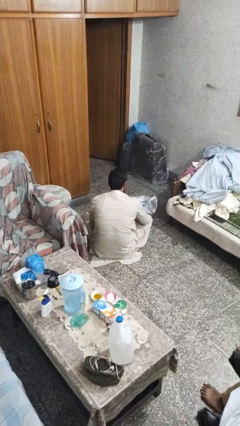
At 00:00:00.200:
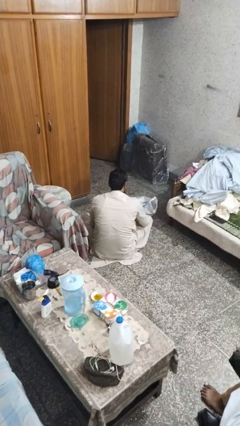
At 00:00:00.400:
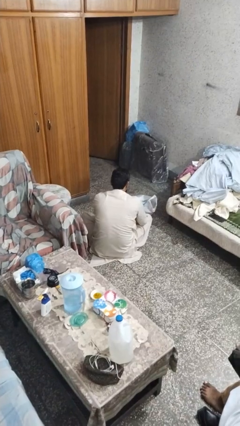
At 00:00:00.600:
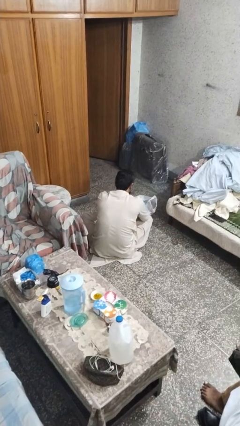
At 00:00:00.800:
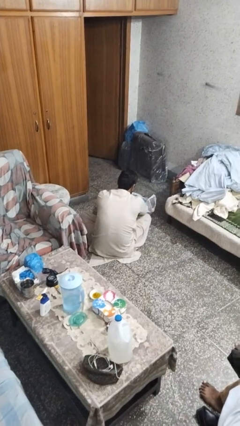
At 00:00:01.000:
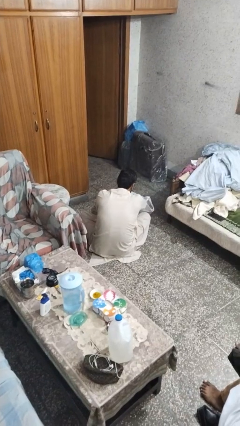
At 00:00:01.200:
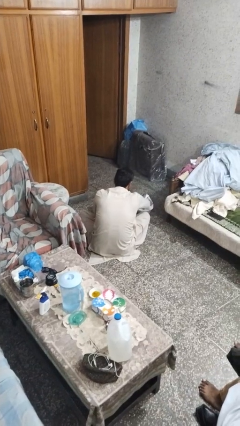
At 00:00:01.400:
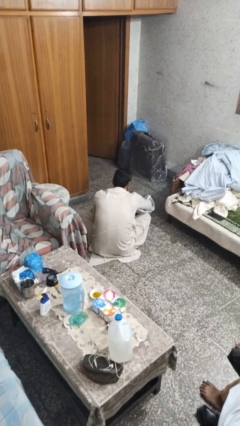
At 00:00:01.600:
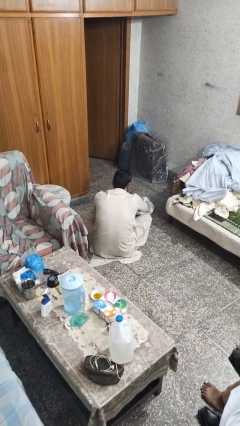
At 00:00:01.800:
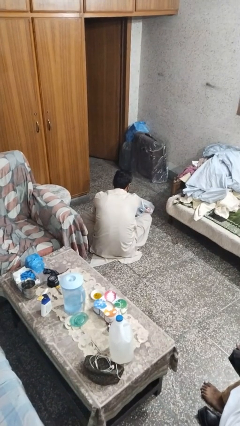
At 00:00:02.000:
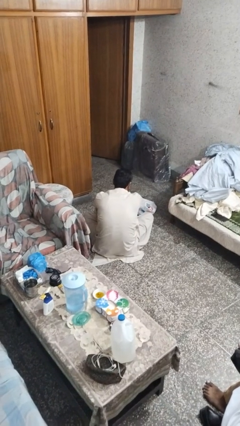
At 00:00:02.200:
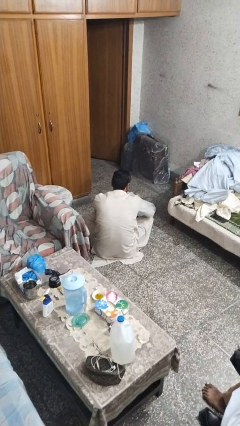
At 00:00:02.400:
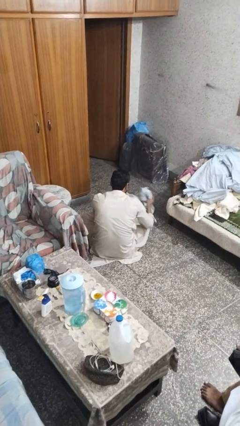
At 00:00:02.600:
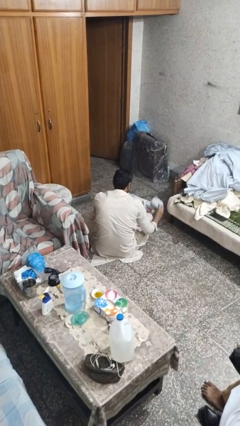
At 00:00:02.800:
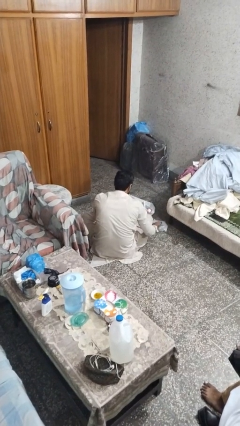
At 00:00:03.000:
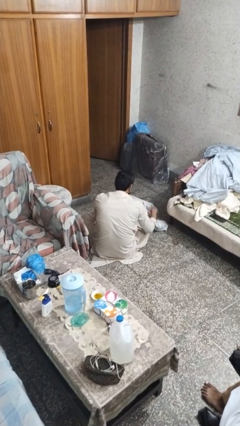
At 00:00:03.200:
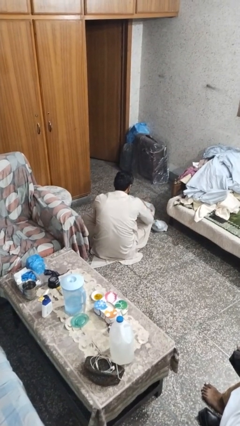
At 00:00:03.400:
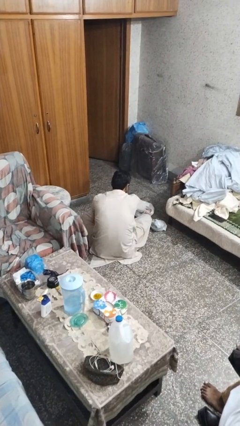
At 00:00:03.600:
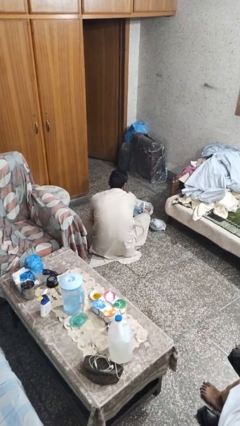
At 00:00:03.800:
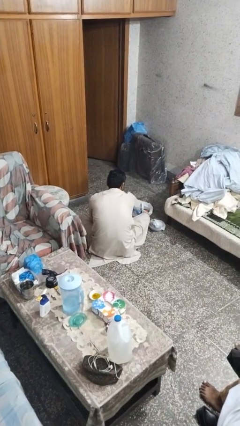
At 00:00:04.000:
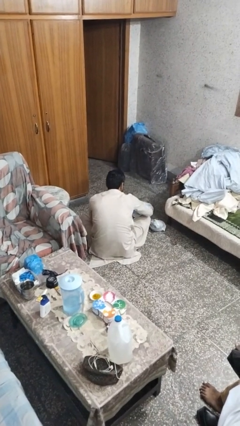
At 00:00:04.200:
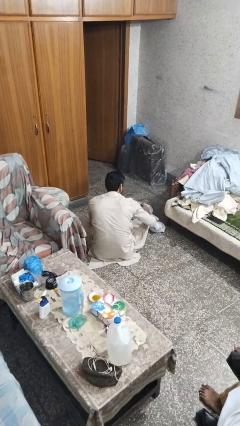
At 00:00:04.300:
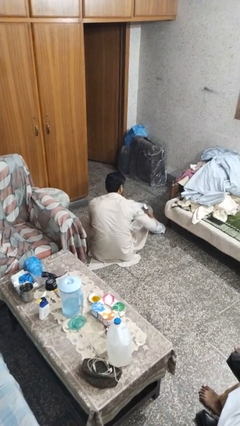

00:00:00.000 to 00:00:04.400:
person takes object from bag

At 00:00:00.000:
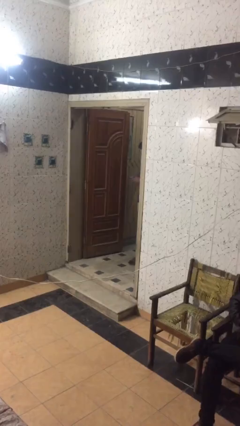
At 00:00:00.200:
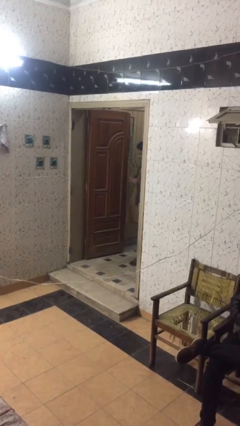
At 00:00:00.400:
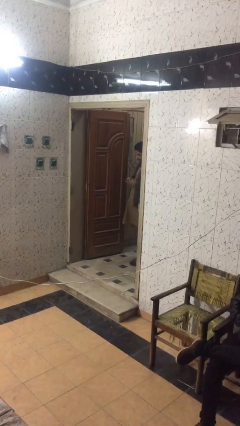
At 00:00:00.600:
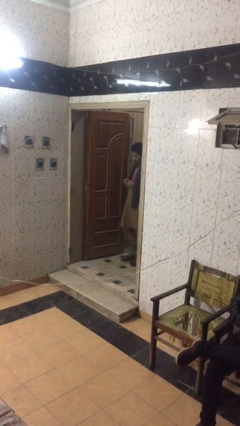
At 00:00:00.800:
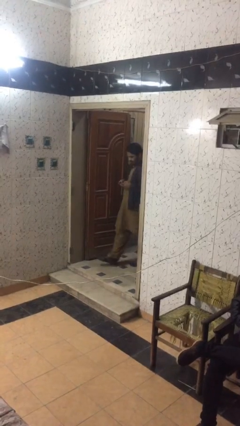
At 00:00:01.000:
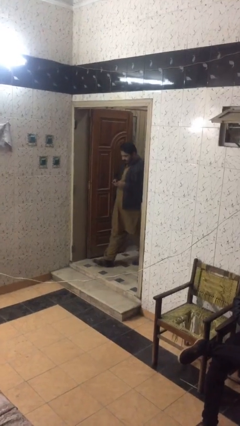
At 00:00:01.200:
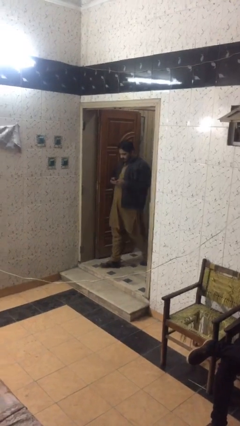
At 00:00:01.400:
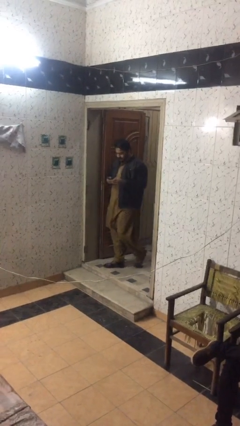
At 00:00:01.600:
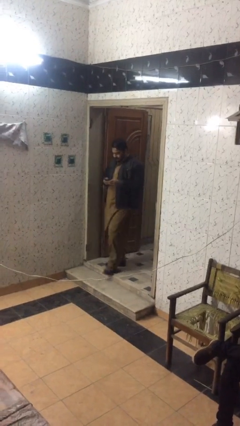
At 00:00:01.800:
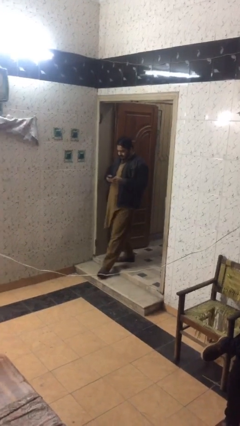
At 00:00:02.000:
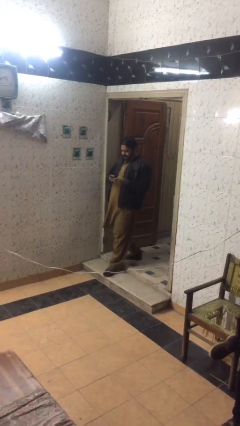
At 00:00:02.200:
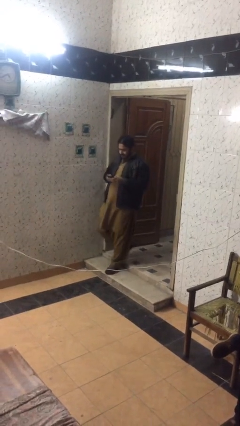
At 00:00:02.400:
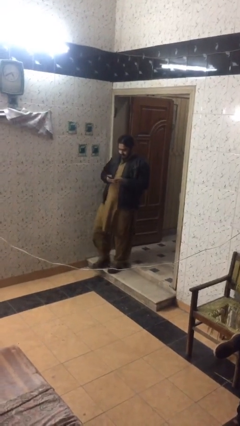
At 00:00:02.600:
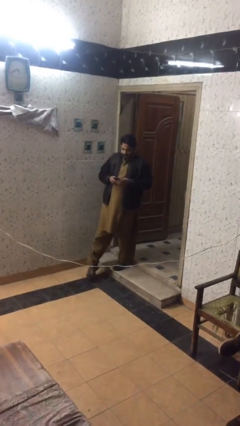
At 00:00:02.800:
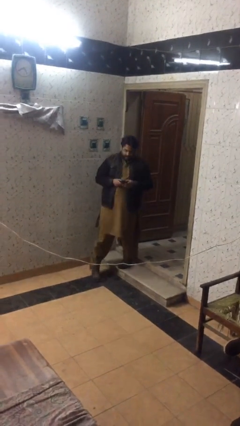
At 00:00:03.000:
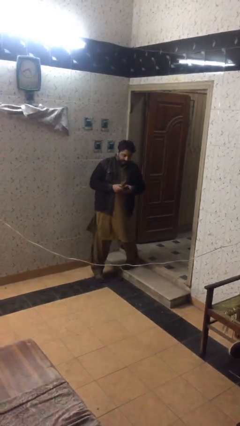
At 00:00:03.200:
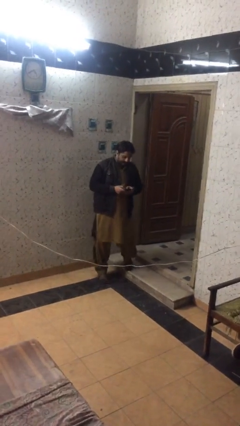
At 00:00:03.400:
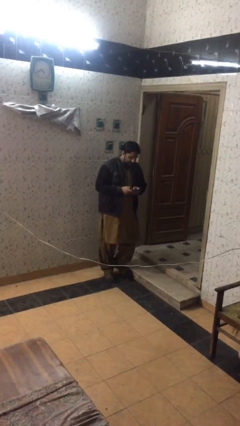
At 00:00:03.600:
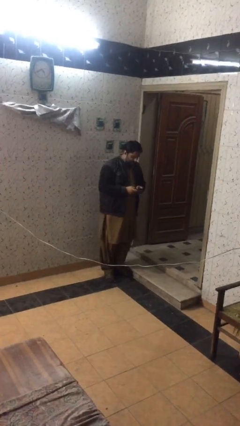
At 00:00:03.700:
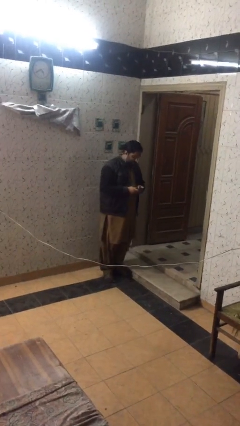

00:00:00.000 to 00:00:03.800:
person enters scene through structure

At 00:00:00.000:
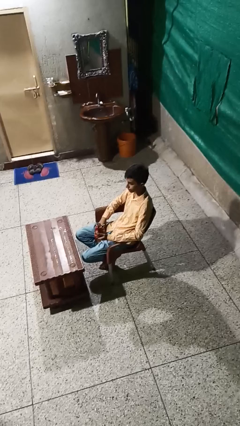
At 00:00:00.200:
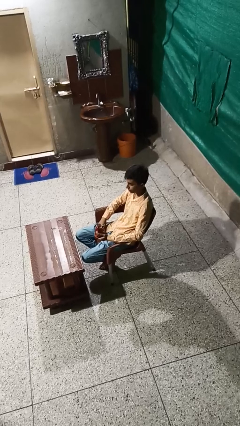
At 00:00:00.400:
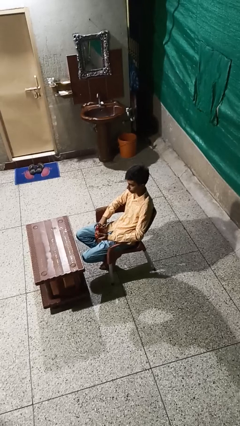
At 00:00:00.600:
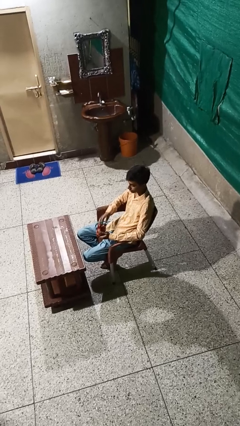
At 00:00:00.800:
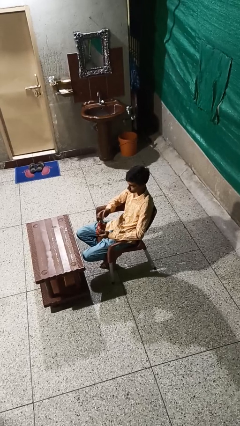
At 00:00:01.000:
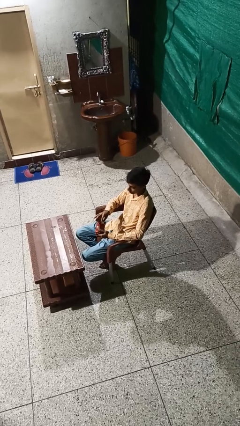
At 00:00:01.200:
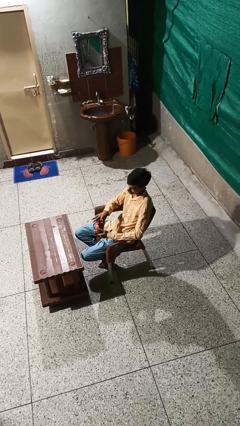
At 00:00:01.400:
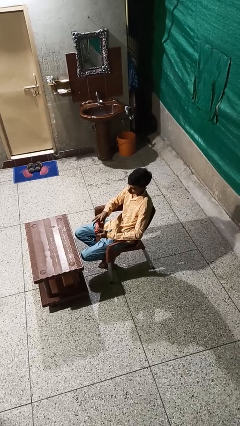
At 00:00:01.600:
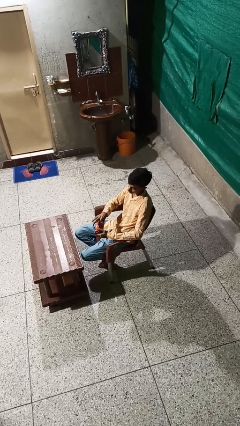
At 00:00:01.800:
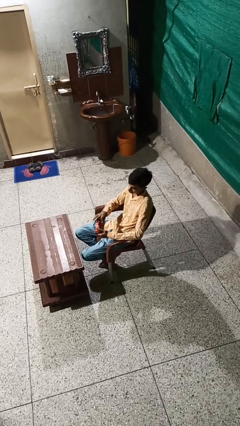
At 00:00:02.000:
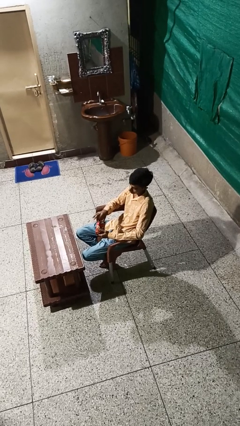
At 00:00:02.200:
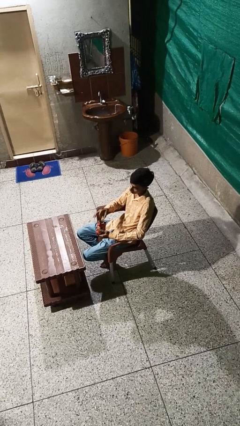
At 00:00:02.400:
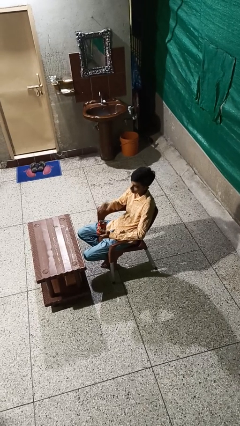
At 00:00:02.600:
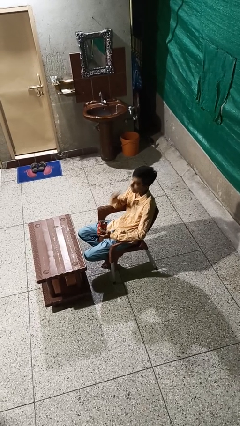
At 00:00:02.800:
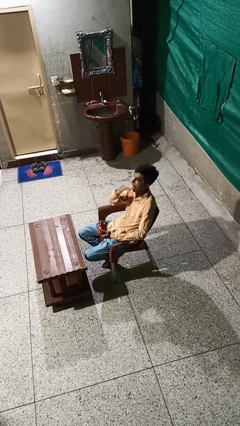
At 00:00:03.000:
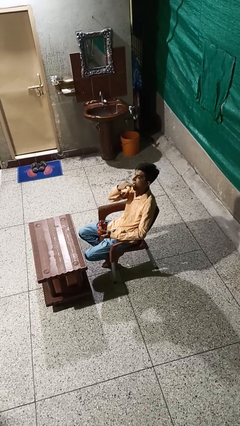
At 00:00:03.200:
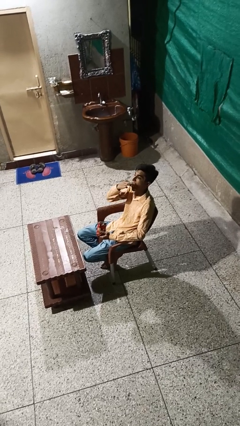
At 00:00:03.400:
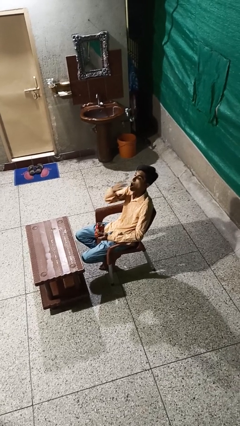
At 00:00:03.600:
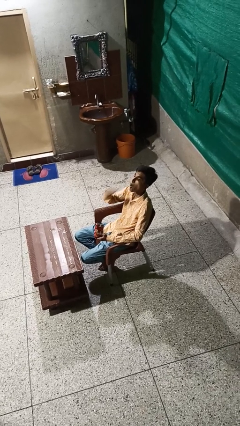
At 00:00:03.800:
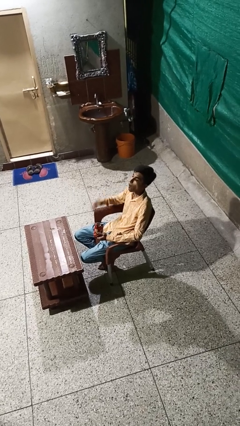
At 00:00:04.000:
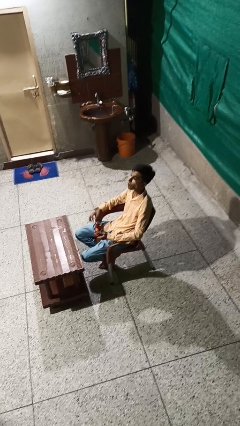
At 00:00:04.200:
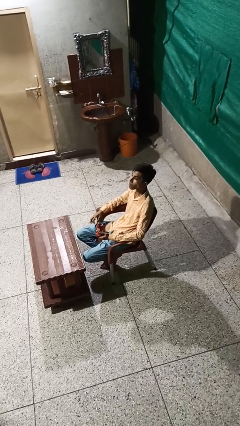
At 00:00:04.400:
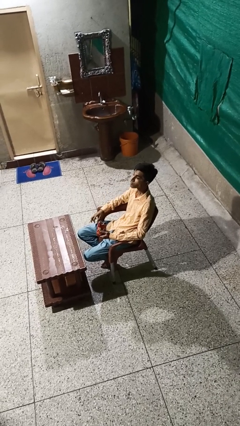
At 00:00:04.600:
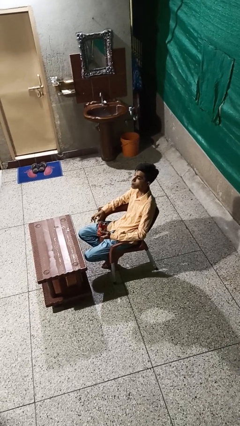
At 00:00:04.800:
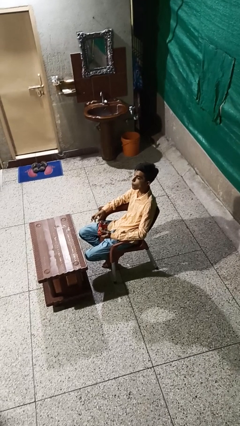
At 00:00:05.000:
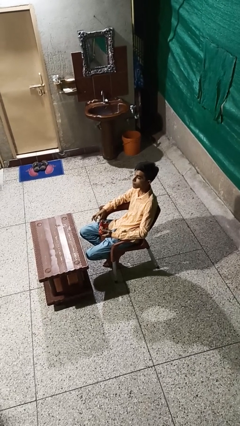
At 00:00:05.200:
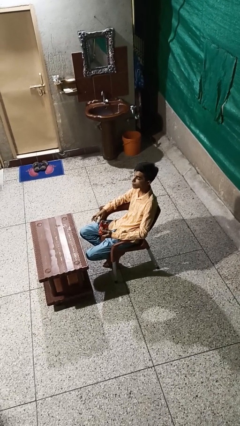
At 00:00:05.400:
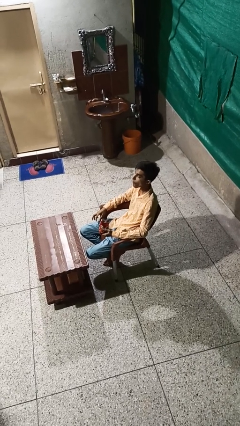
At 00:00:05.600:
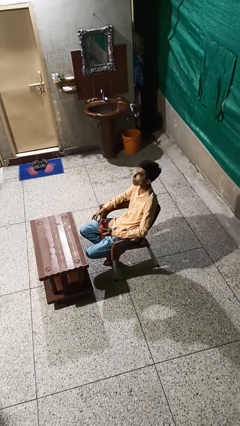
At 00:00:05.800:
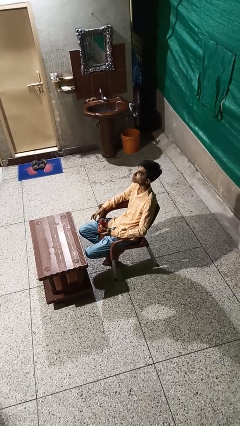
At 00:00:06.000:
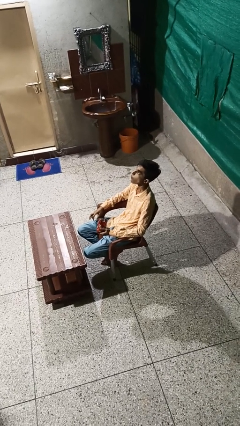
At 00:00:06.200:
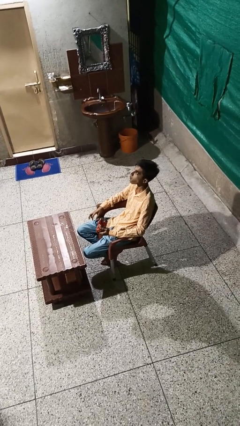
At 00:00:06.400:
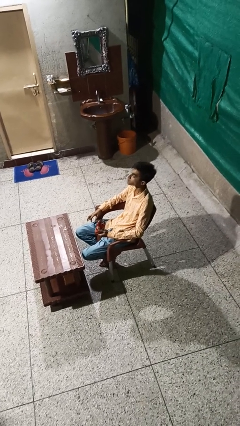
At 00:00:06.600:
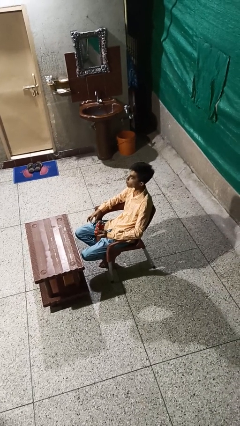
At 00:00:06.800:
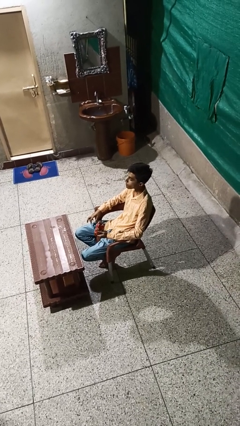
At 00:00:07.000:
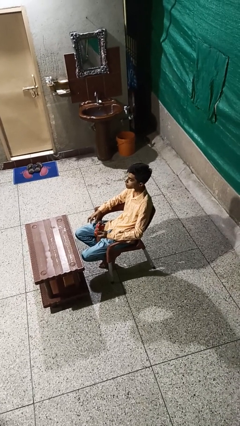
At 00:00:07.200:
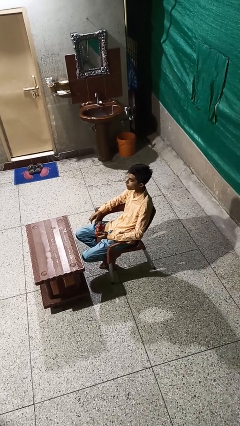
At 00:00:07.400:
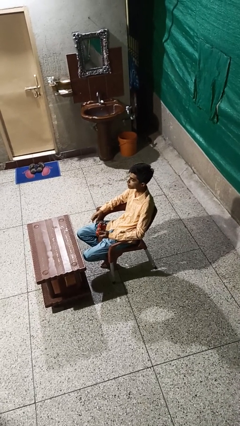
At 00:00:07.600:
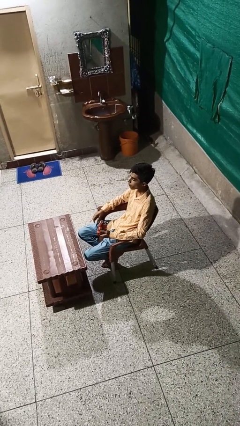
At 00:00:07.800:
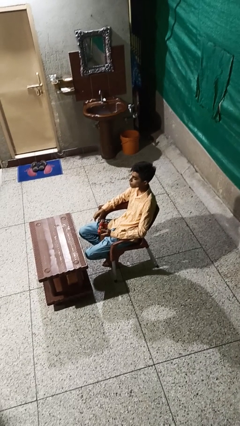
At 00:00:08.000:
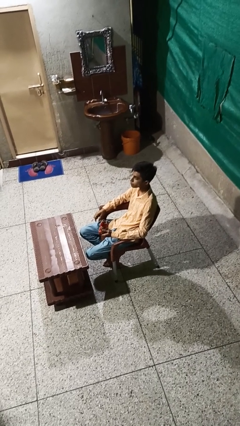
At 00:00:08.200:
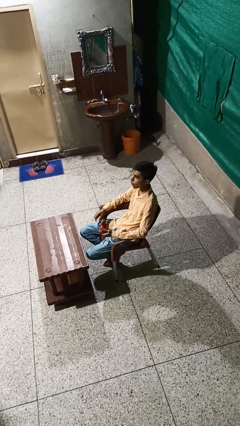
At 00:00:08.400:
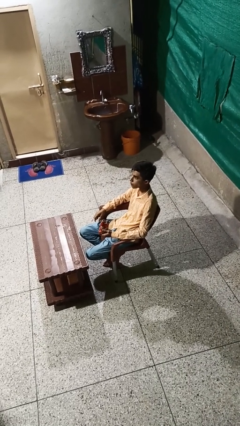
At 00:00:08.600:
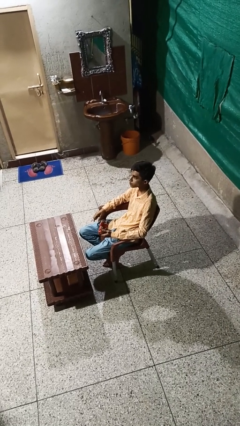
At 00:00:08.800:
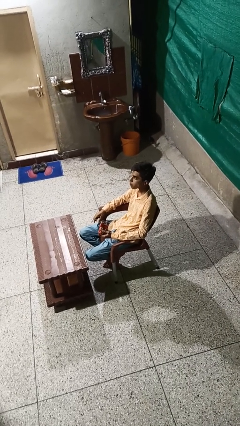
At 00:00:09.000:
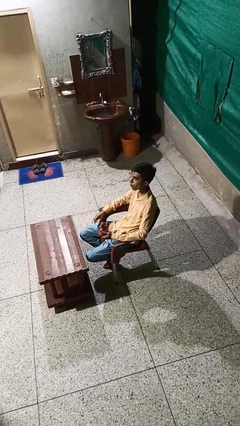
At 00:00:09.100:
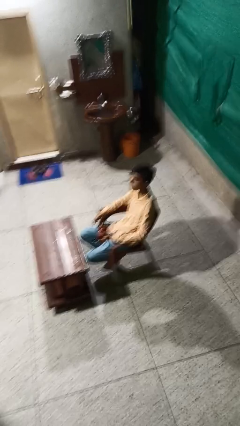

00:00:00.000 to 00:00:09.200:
person eats snack from bag
